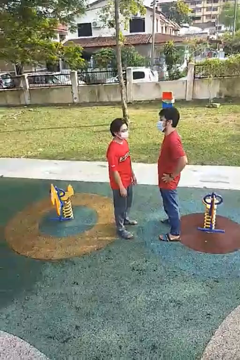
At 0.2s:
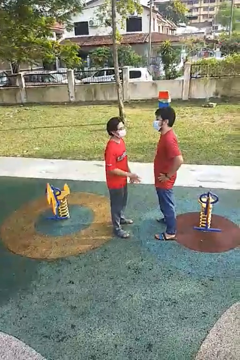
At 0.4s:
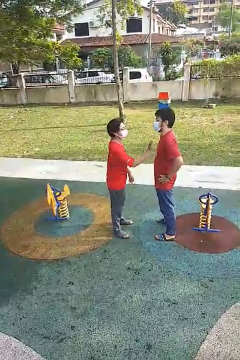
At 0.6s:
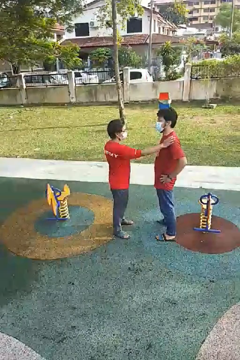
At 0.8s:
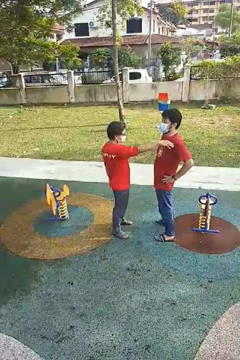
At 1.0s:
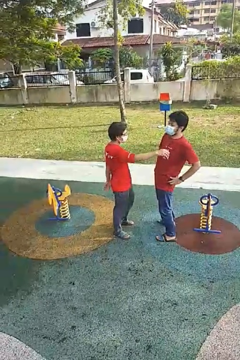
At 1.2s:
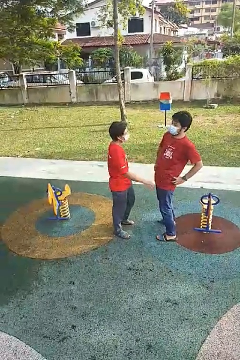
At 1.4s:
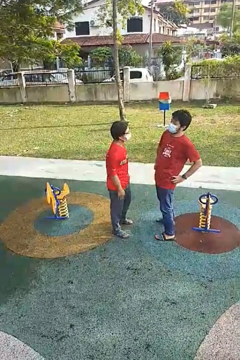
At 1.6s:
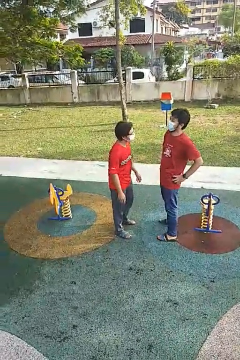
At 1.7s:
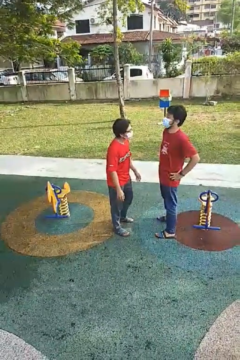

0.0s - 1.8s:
person shoves person

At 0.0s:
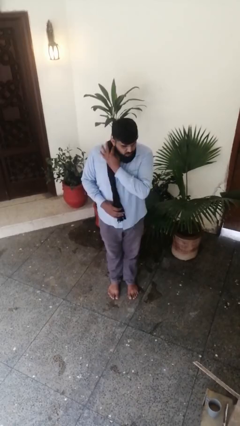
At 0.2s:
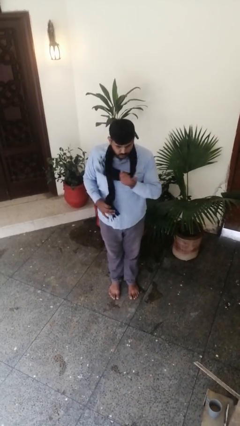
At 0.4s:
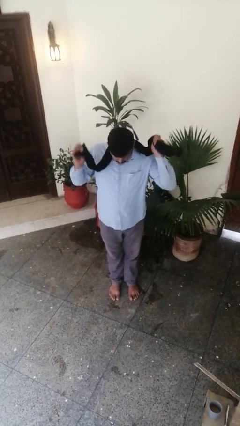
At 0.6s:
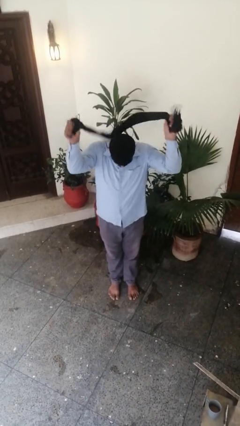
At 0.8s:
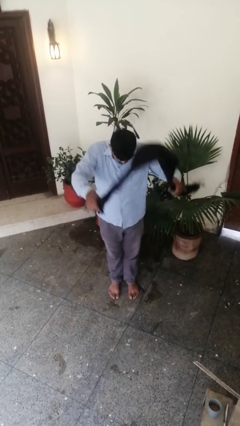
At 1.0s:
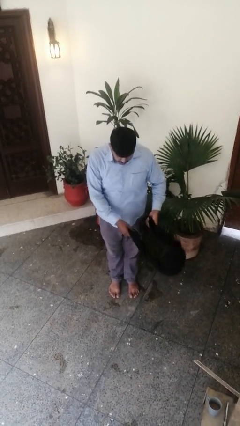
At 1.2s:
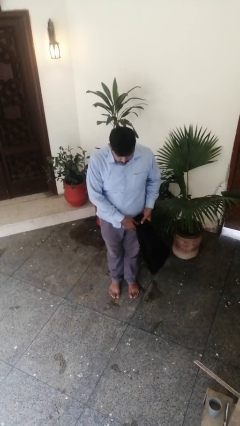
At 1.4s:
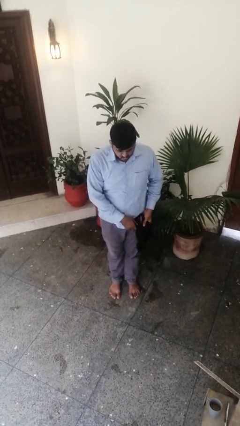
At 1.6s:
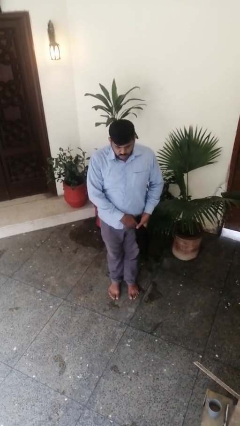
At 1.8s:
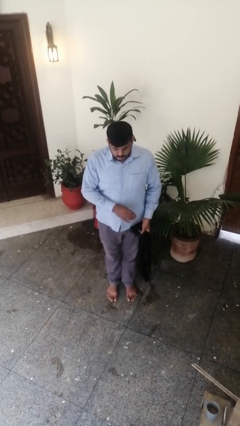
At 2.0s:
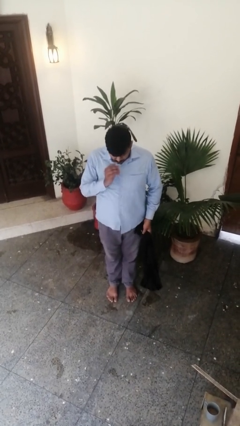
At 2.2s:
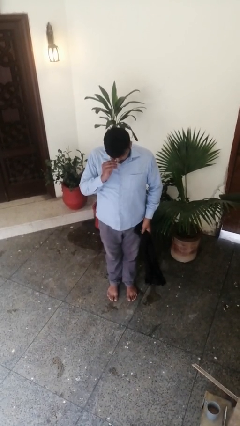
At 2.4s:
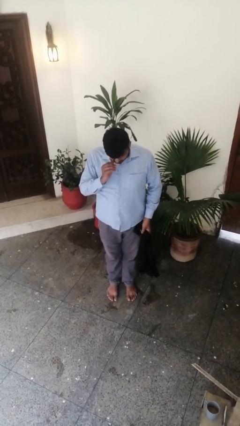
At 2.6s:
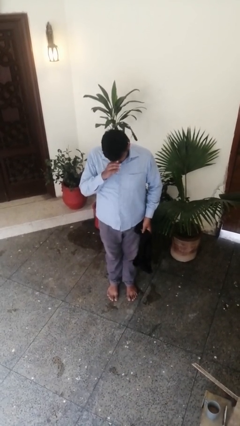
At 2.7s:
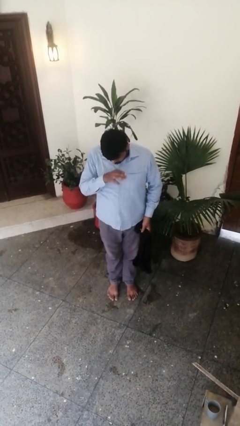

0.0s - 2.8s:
person takes off scarf

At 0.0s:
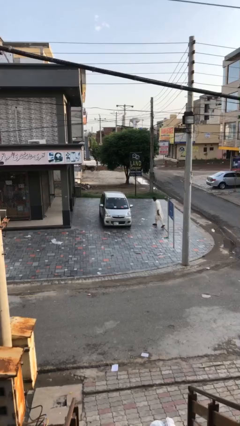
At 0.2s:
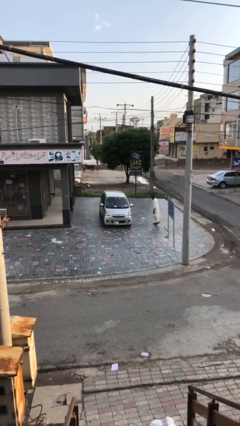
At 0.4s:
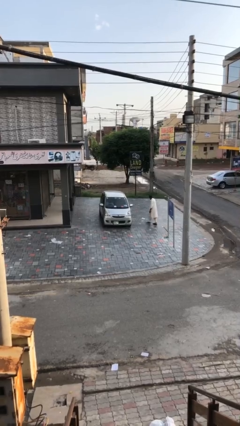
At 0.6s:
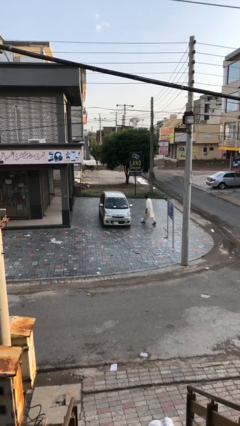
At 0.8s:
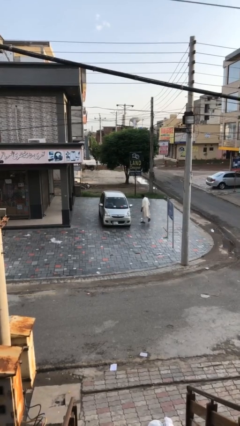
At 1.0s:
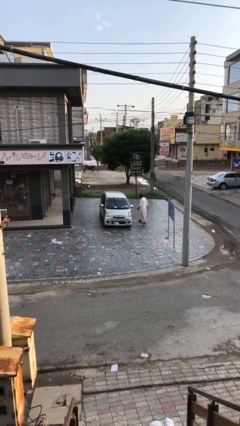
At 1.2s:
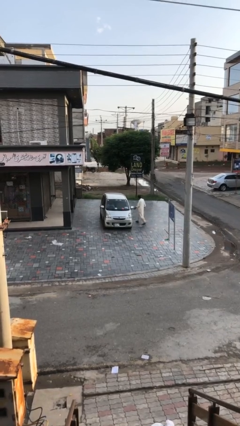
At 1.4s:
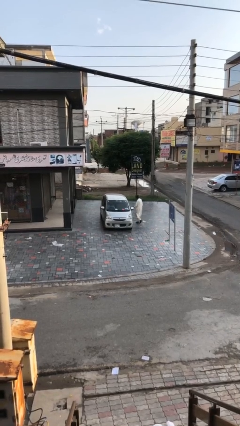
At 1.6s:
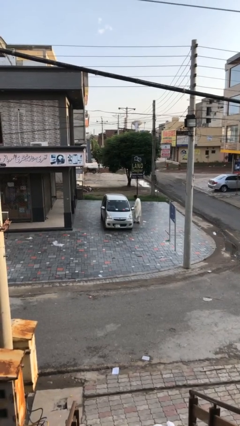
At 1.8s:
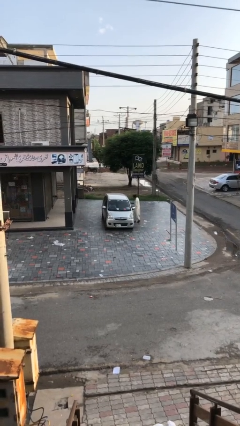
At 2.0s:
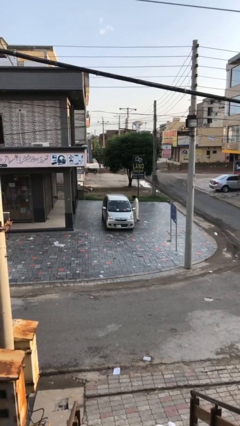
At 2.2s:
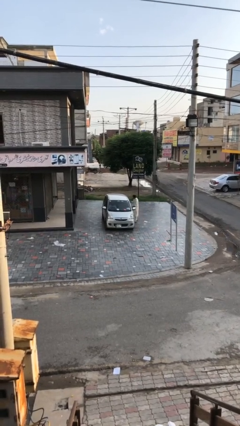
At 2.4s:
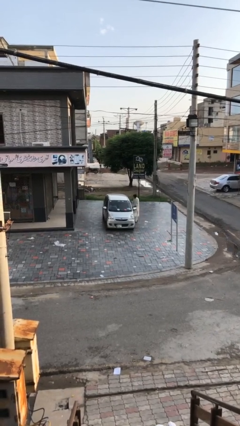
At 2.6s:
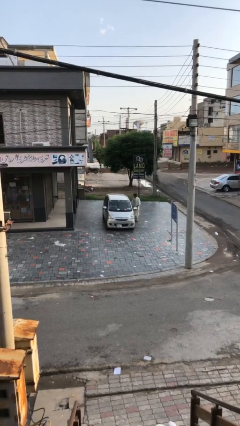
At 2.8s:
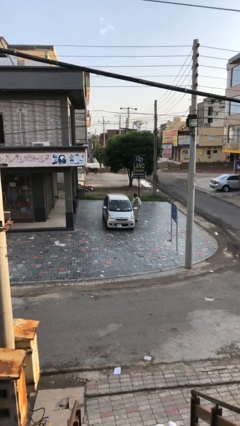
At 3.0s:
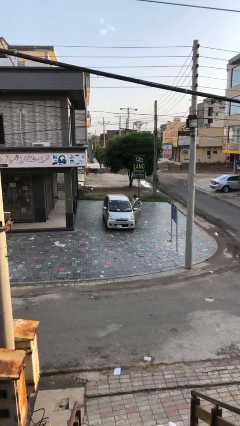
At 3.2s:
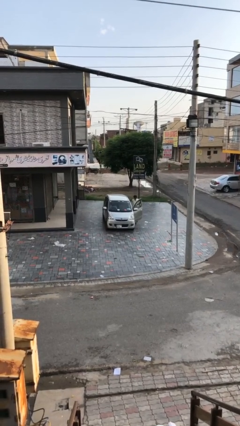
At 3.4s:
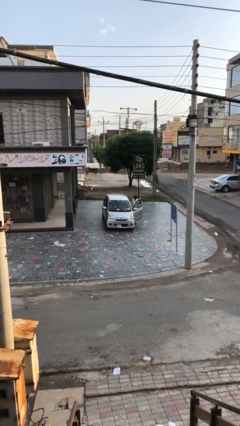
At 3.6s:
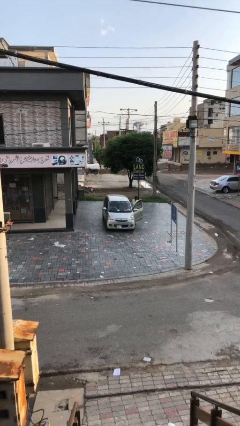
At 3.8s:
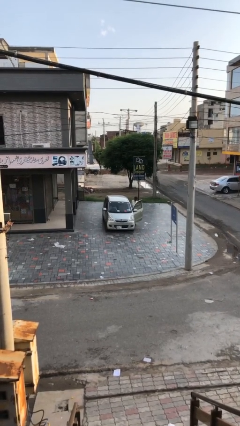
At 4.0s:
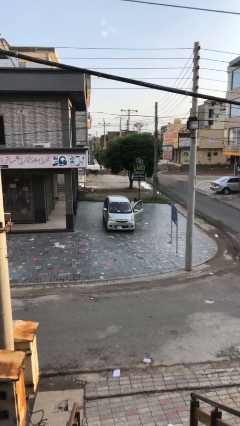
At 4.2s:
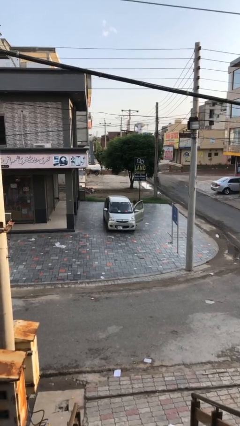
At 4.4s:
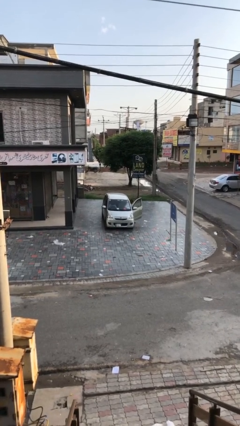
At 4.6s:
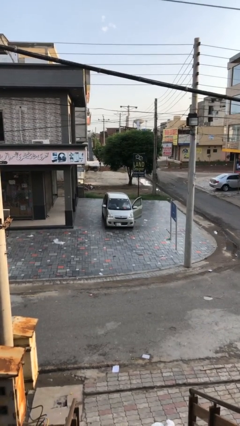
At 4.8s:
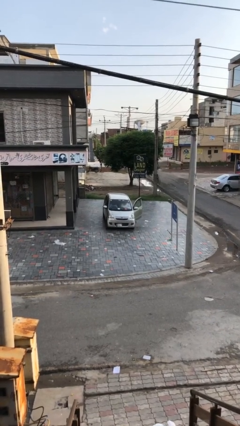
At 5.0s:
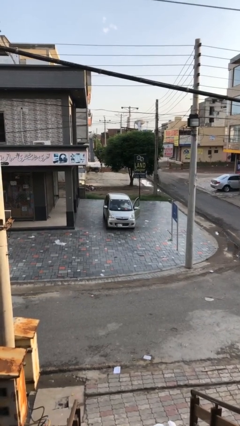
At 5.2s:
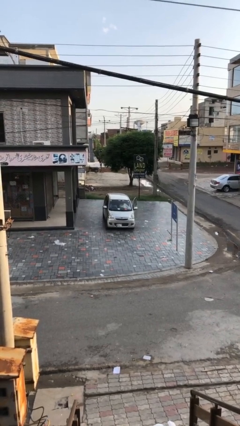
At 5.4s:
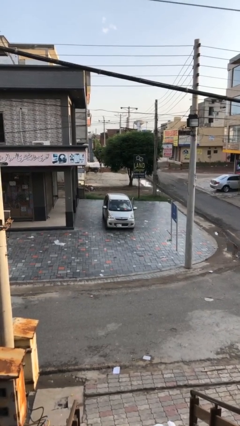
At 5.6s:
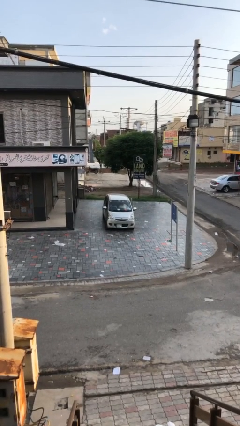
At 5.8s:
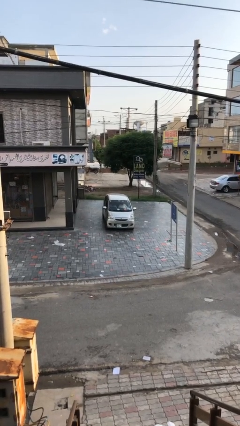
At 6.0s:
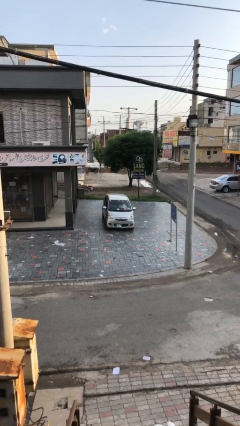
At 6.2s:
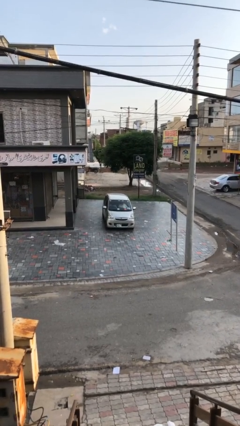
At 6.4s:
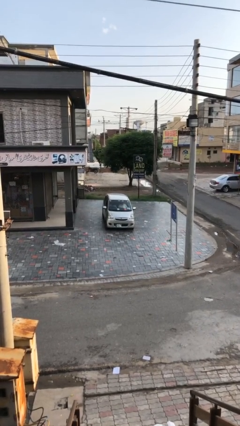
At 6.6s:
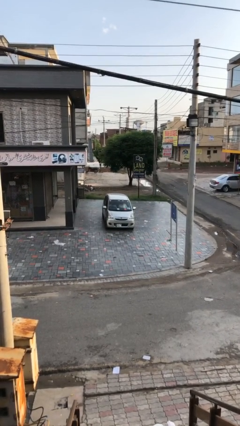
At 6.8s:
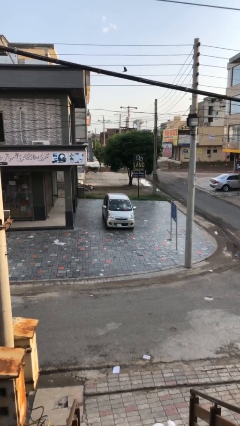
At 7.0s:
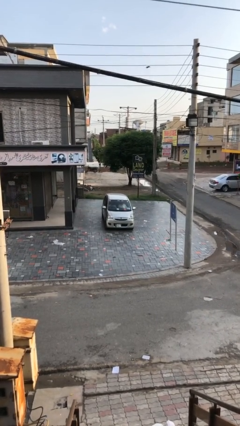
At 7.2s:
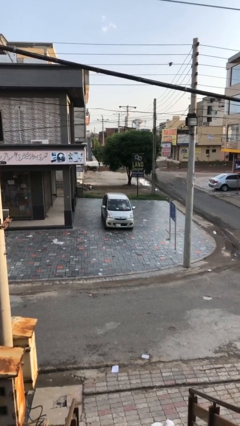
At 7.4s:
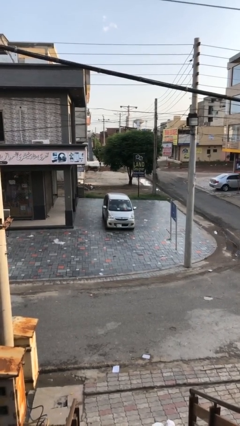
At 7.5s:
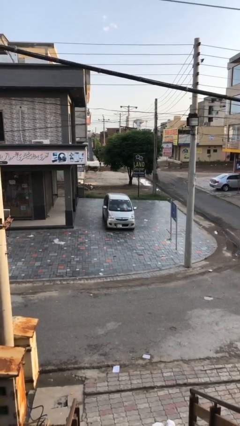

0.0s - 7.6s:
car picks up person

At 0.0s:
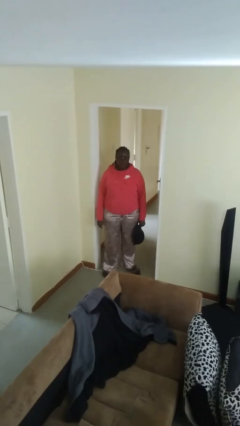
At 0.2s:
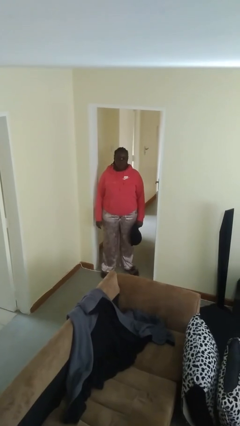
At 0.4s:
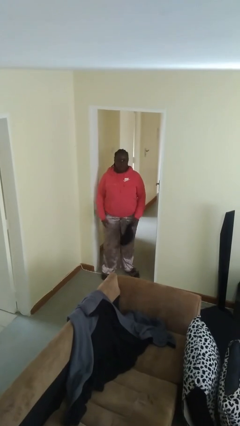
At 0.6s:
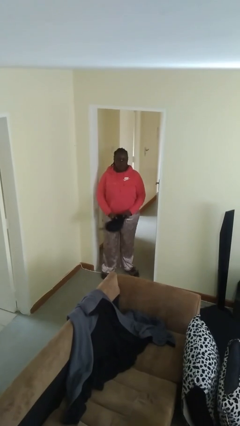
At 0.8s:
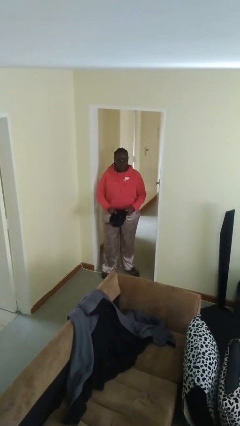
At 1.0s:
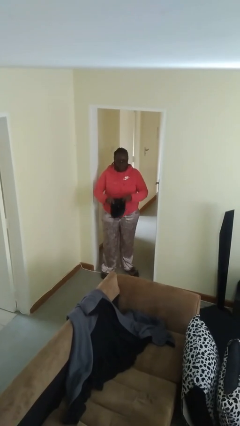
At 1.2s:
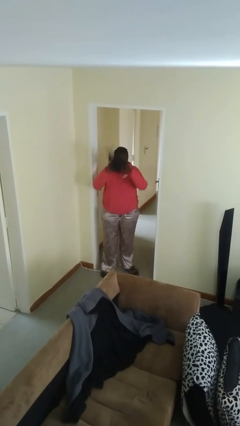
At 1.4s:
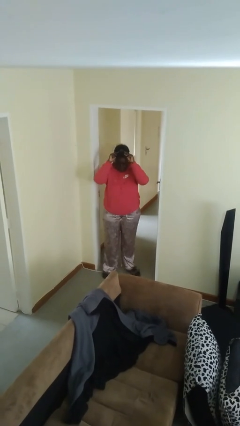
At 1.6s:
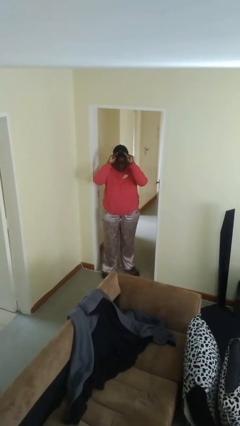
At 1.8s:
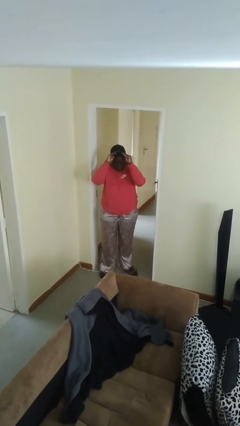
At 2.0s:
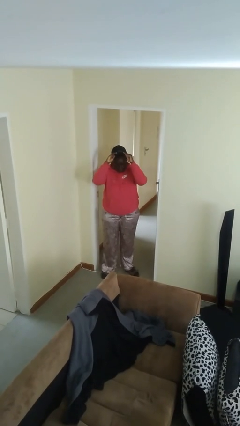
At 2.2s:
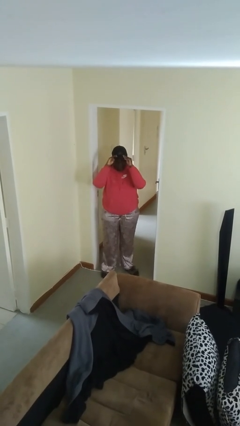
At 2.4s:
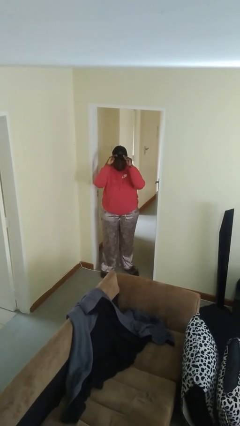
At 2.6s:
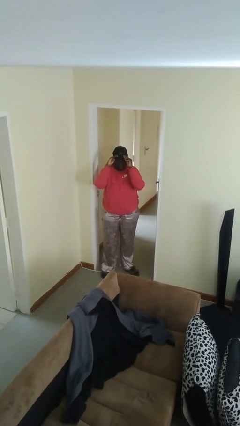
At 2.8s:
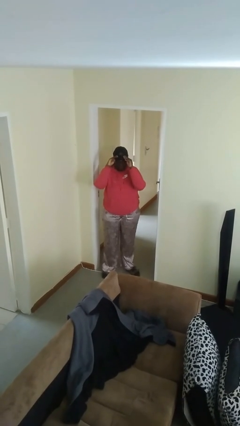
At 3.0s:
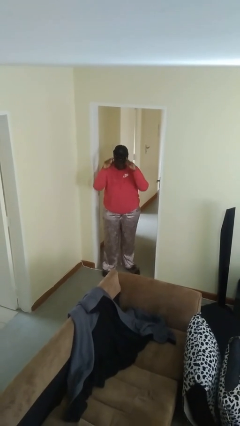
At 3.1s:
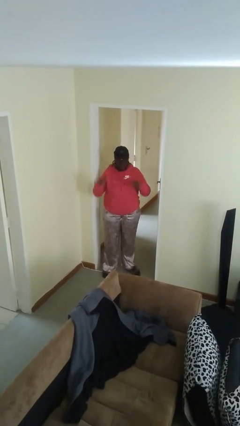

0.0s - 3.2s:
person puts on hat

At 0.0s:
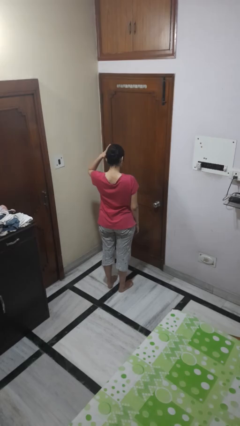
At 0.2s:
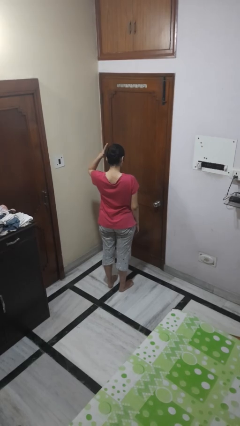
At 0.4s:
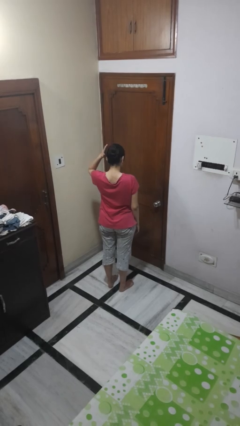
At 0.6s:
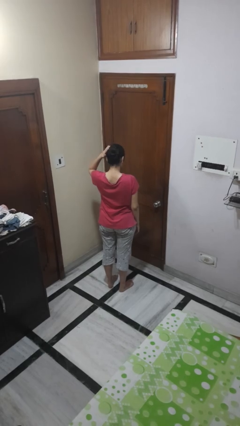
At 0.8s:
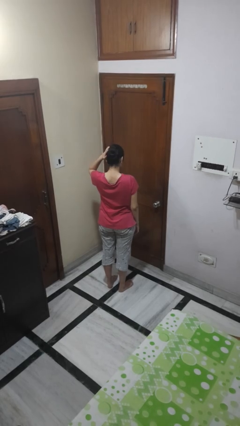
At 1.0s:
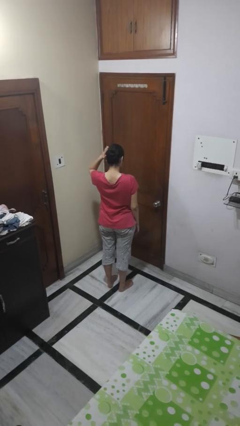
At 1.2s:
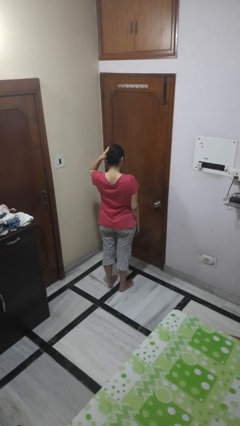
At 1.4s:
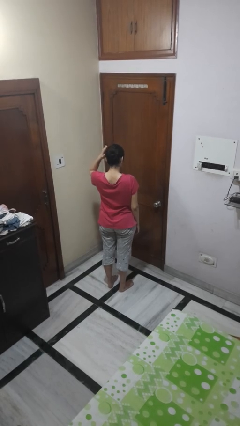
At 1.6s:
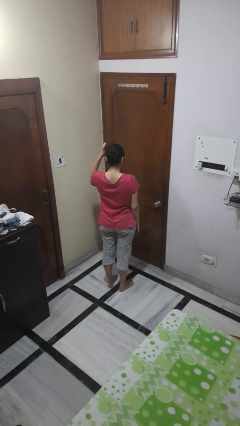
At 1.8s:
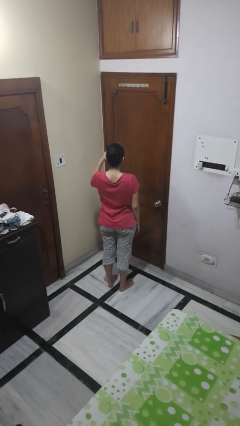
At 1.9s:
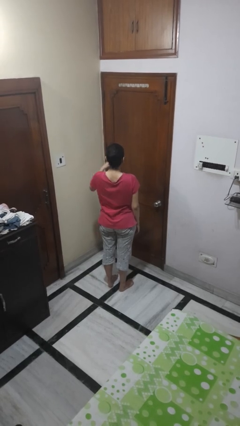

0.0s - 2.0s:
person pats head

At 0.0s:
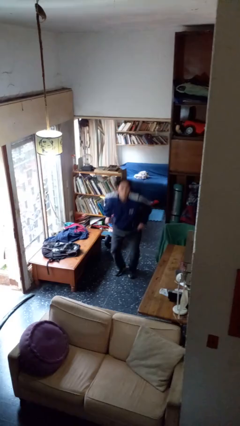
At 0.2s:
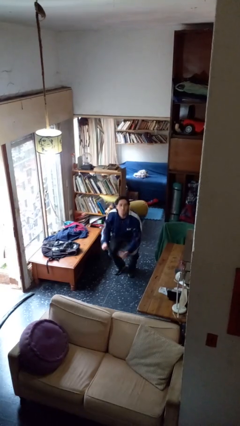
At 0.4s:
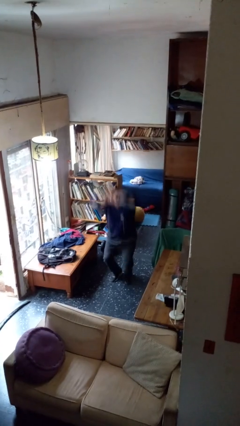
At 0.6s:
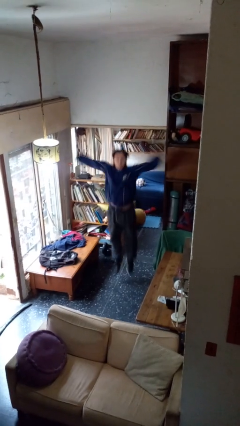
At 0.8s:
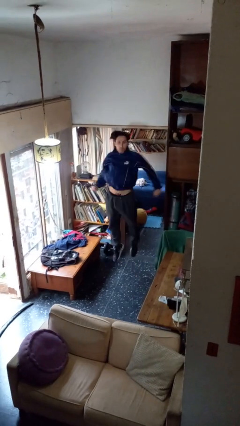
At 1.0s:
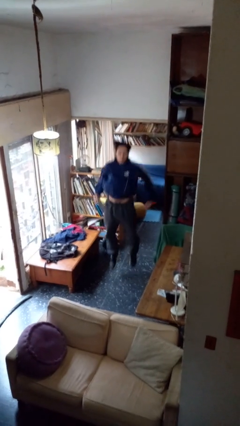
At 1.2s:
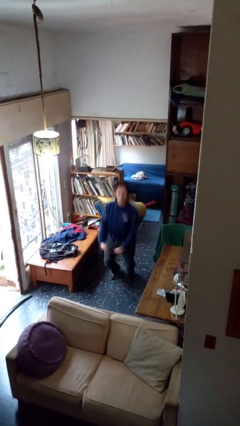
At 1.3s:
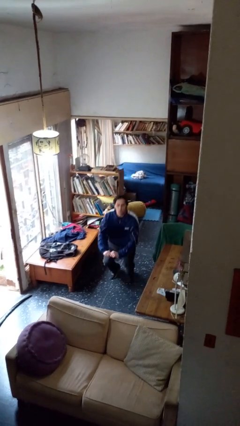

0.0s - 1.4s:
person jumps
